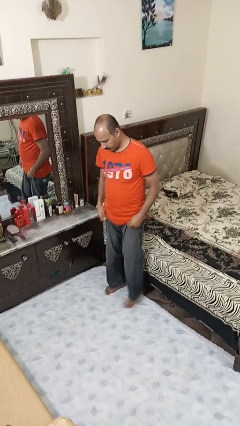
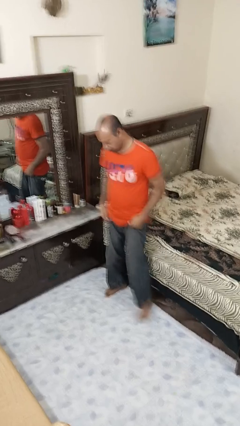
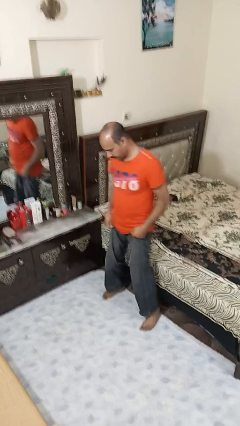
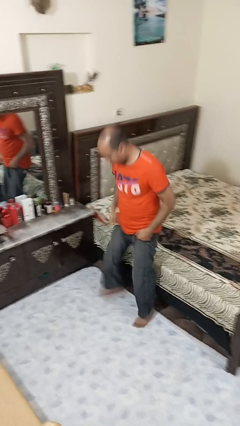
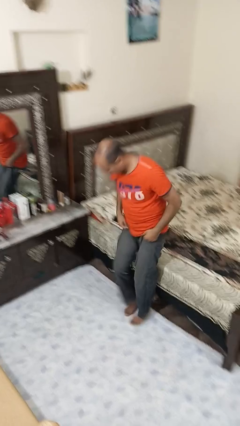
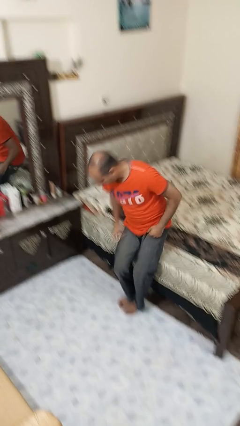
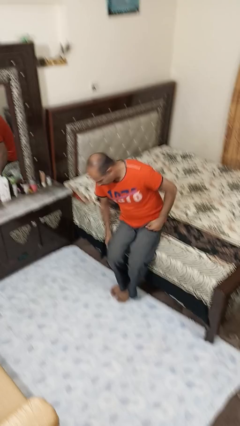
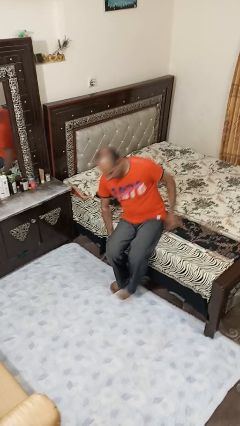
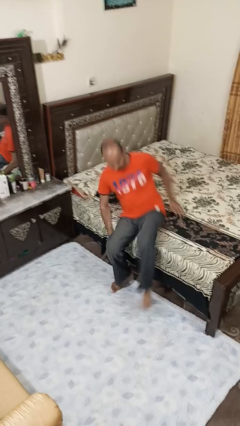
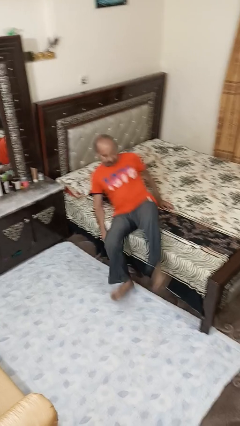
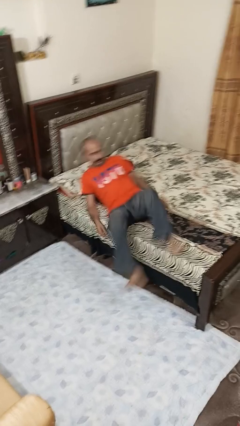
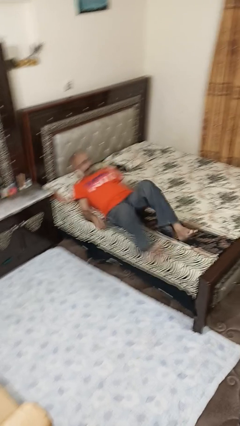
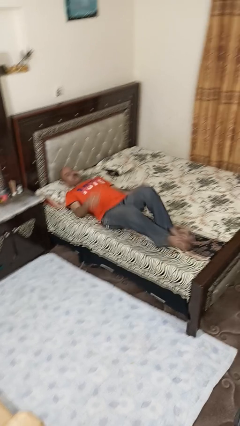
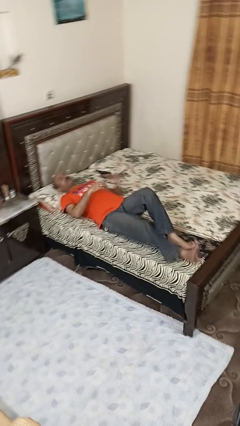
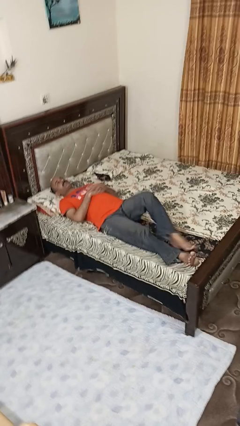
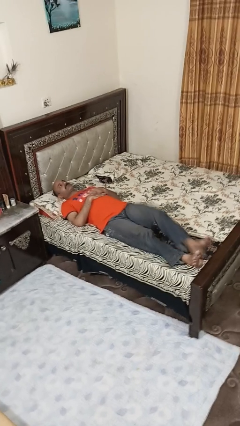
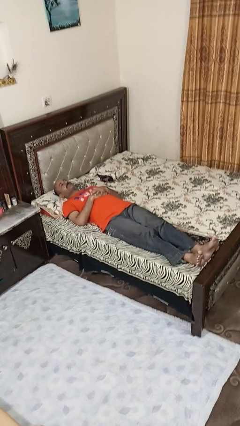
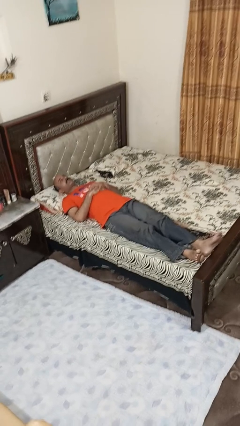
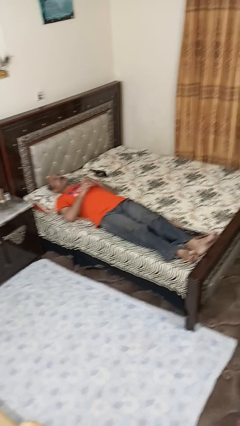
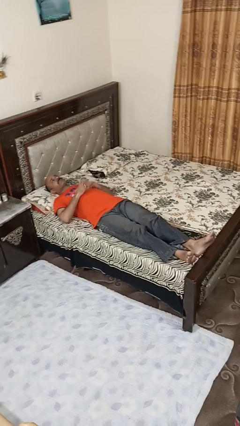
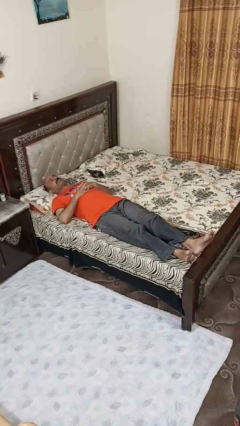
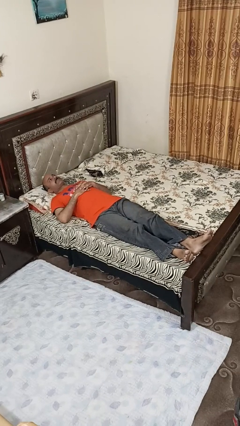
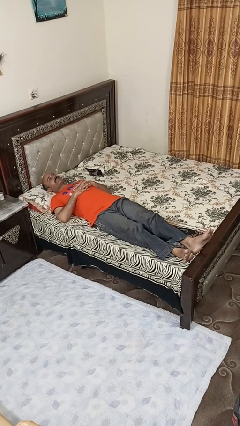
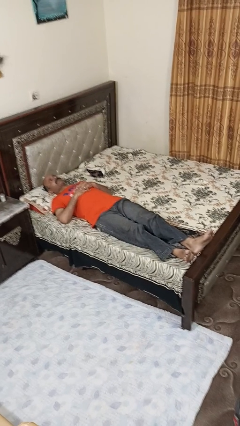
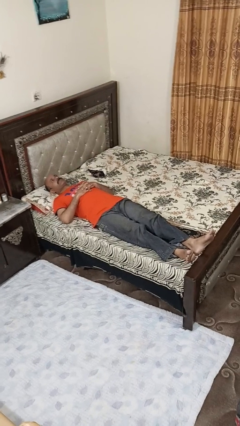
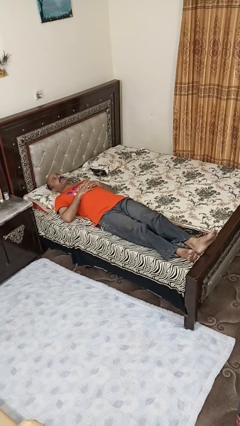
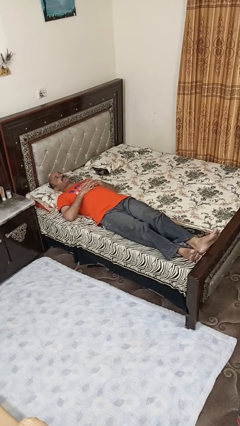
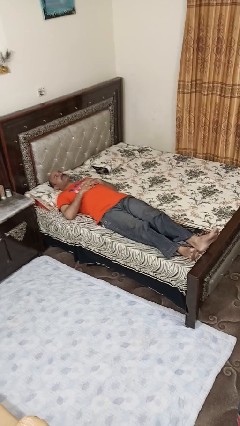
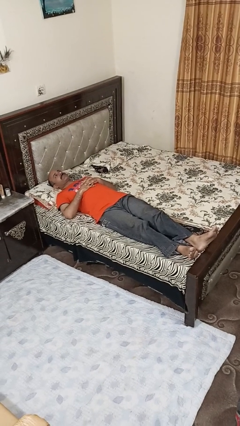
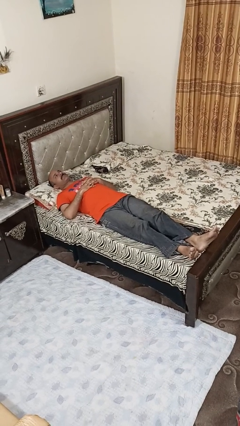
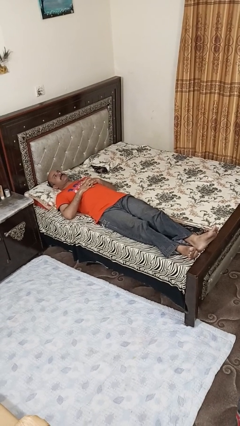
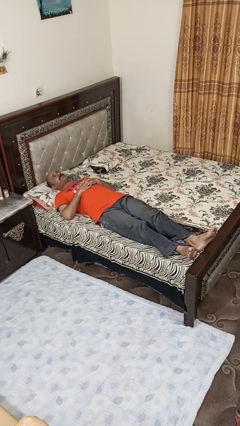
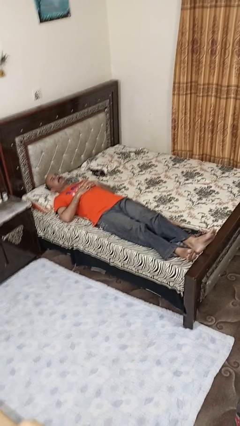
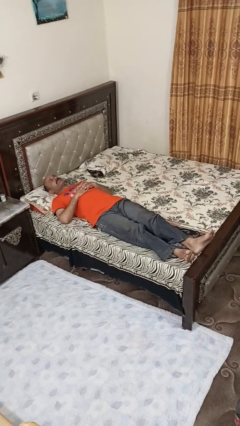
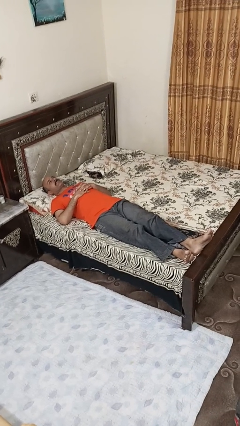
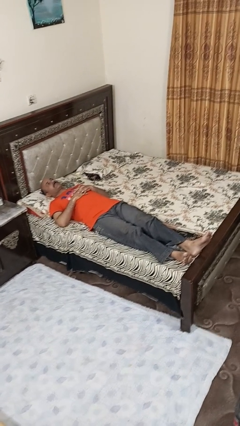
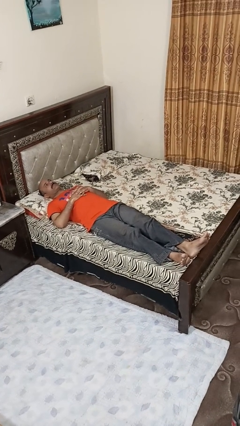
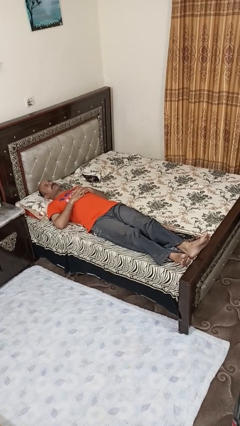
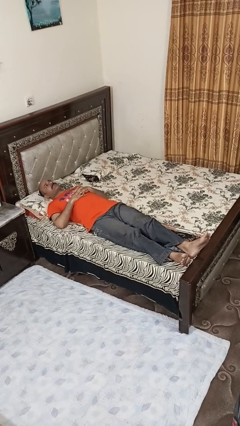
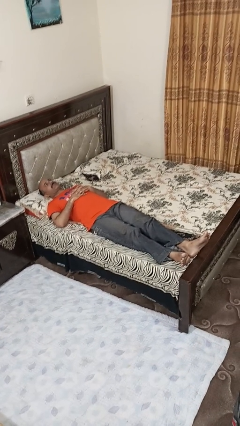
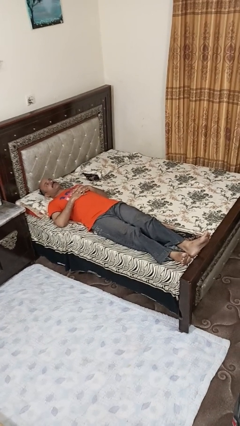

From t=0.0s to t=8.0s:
person lies down on bed

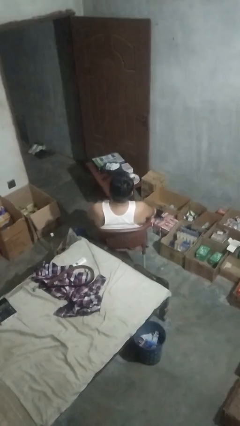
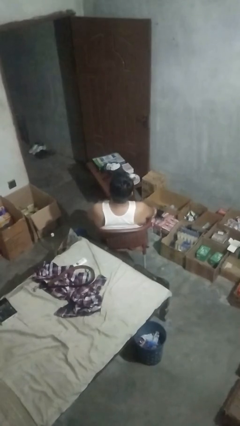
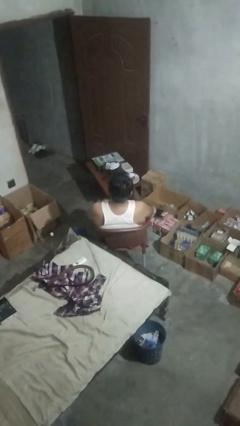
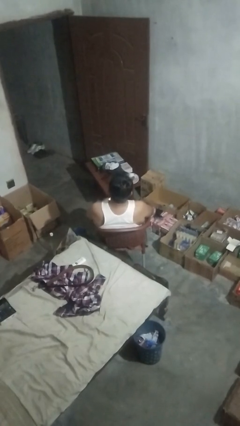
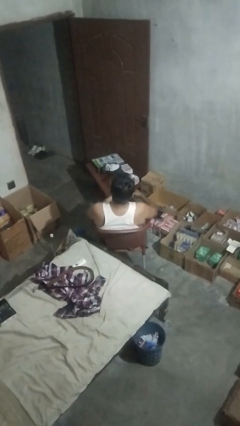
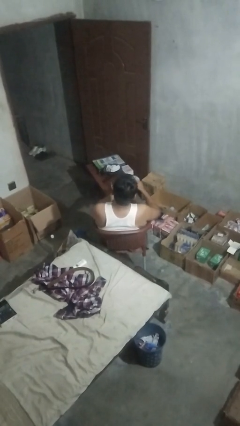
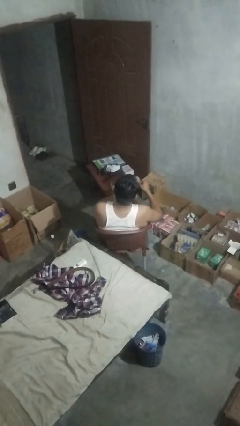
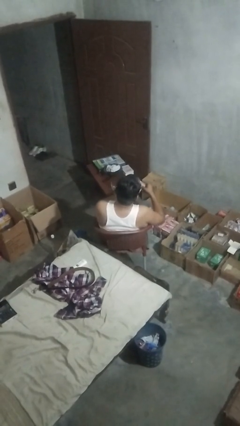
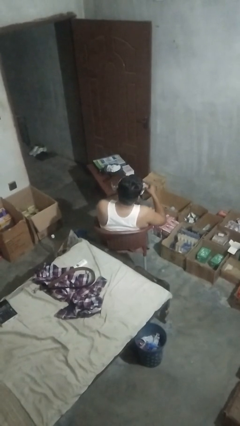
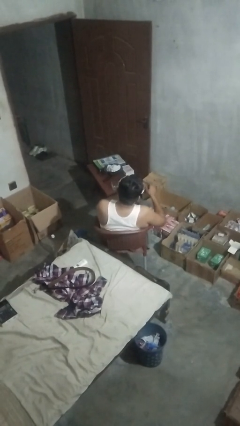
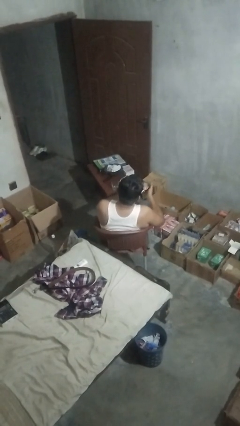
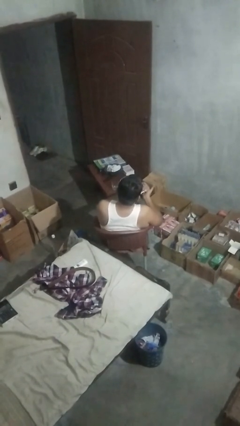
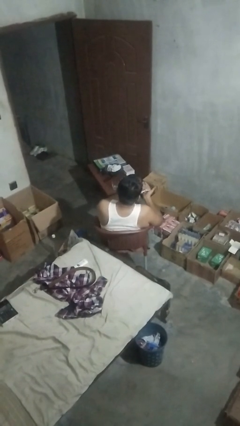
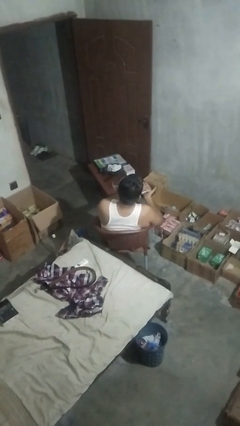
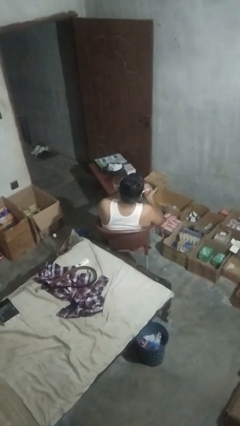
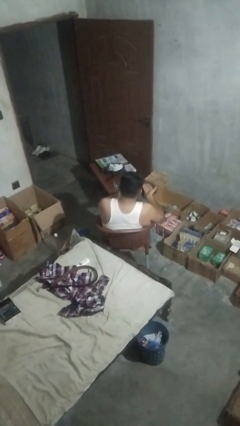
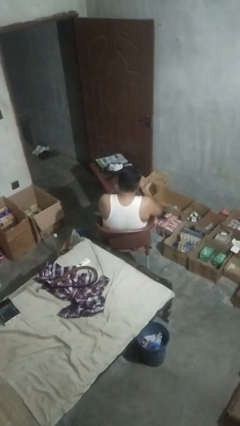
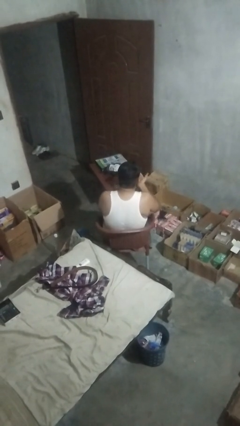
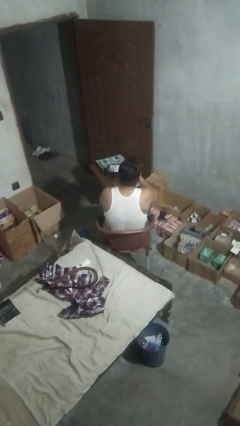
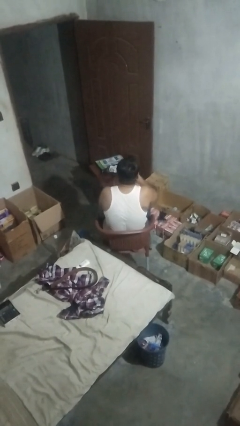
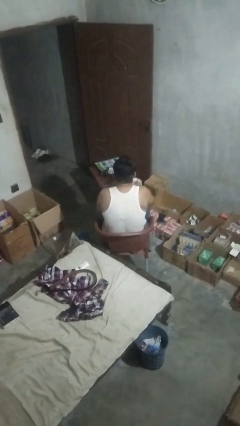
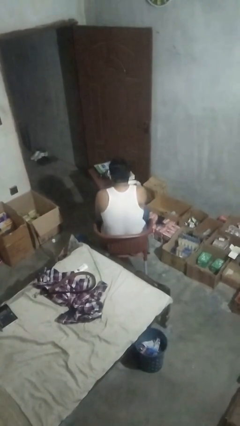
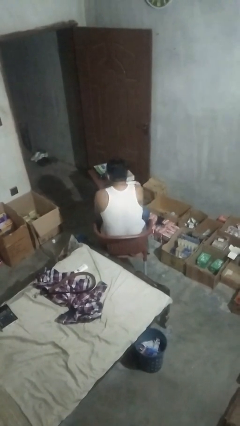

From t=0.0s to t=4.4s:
person takes medicine pills

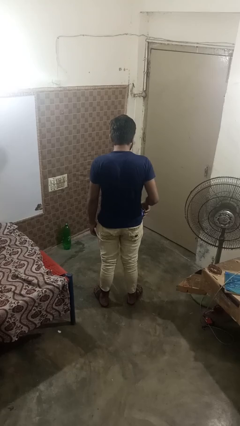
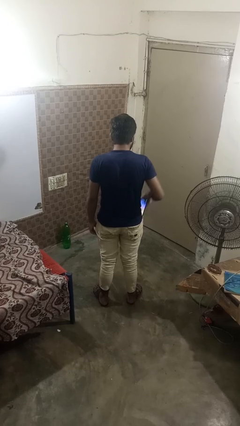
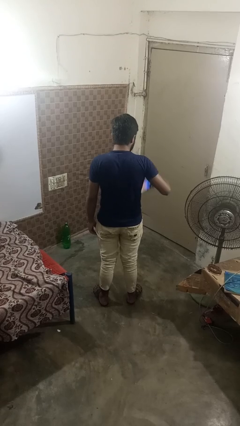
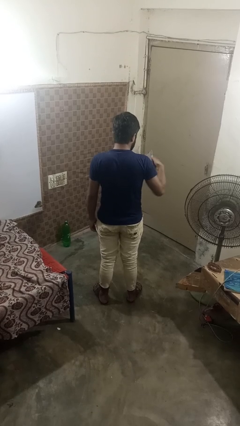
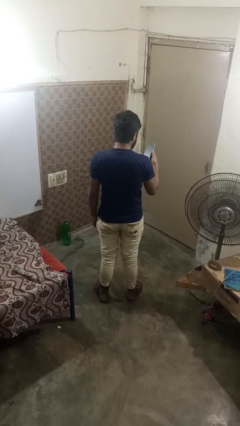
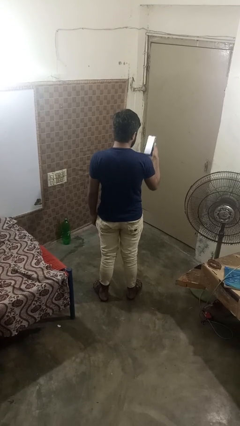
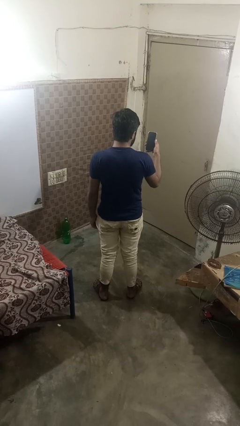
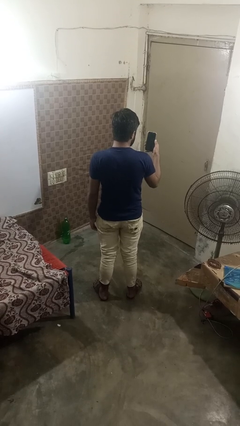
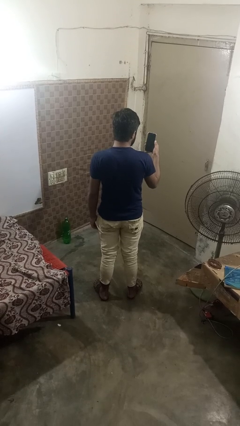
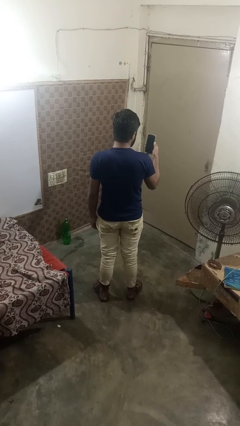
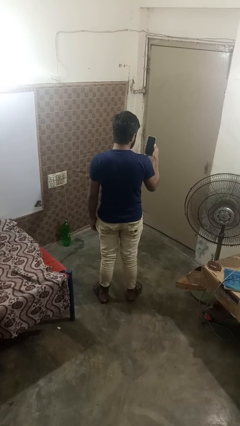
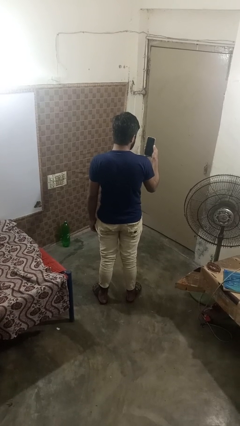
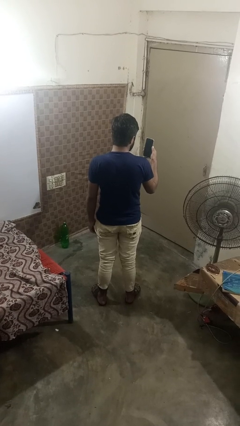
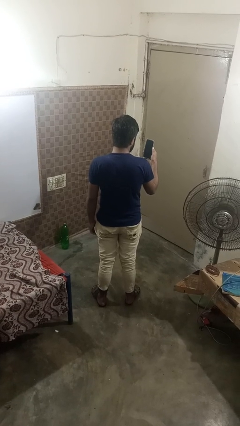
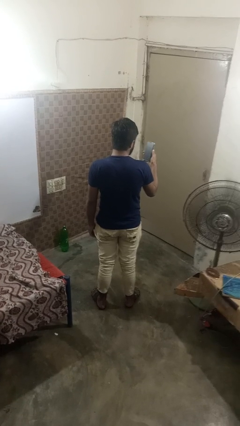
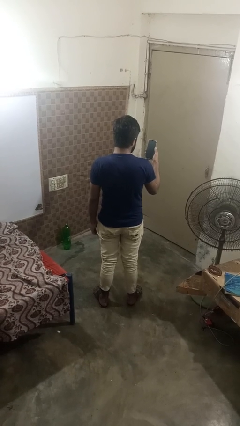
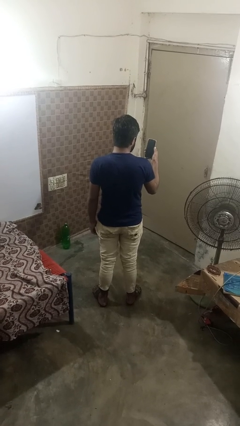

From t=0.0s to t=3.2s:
person takes phone from pocket

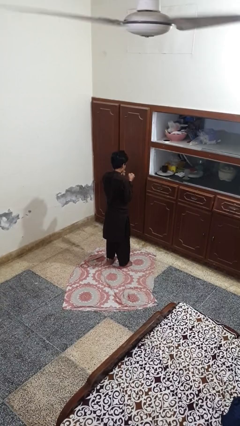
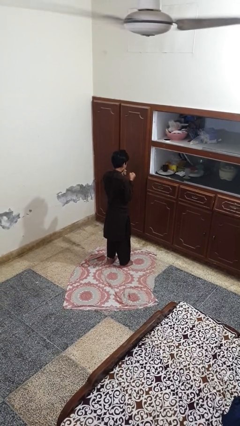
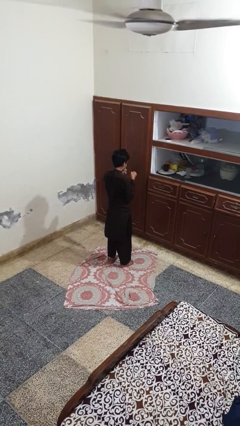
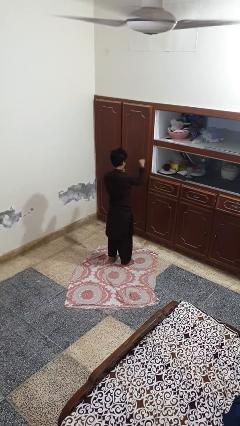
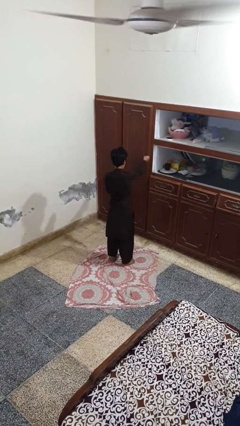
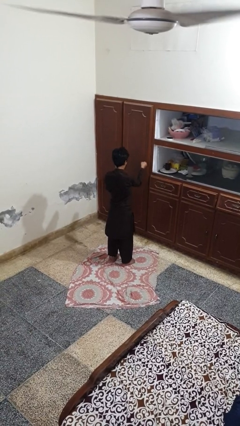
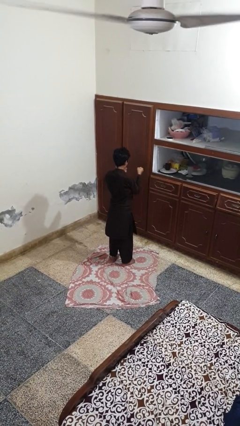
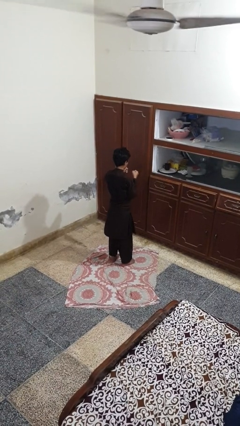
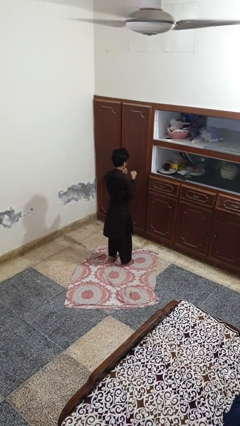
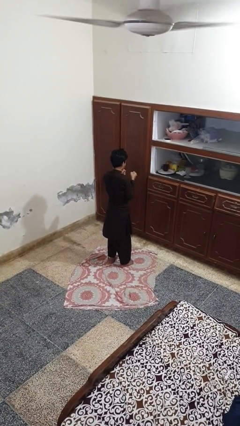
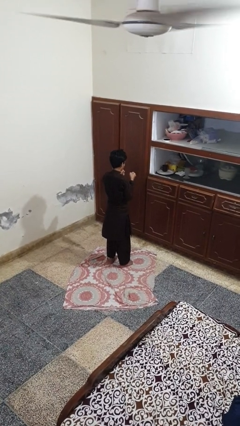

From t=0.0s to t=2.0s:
person punches

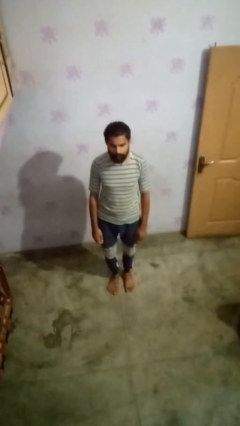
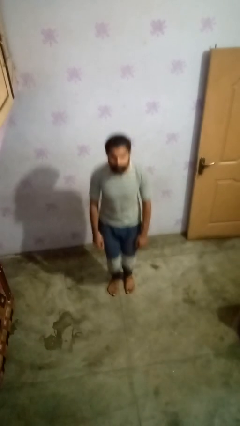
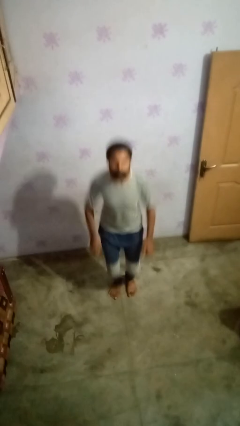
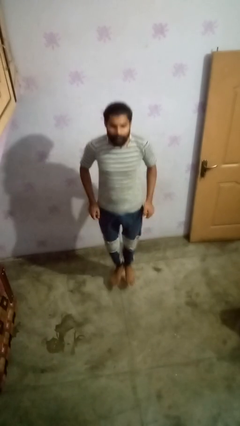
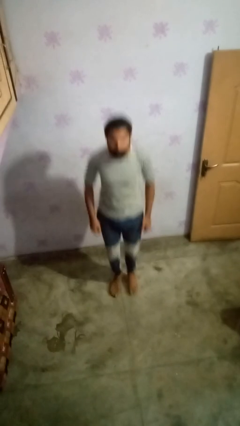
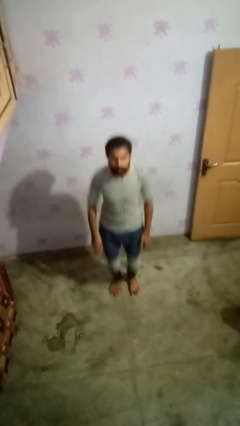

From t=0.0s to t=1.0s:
person jumps
